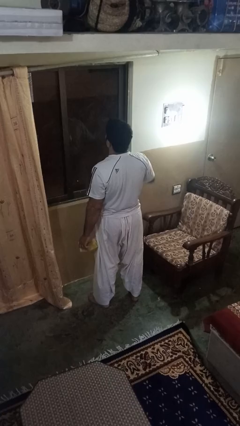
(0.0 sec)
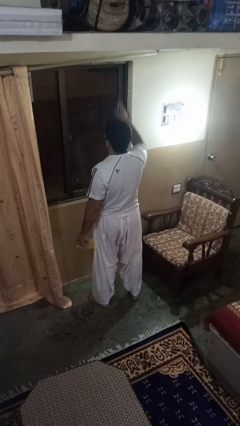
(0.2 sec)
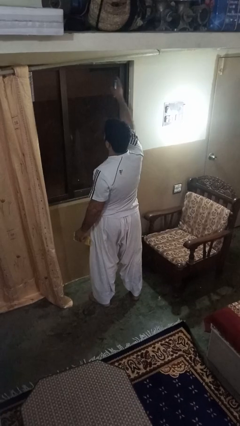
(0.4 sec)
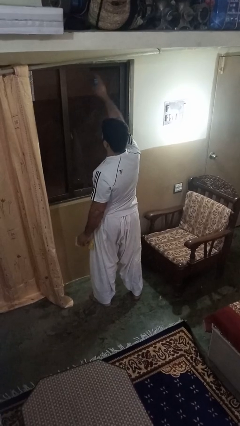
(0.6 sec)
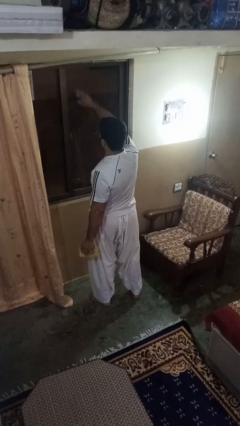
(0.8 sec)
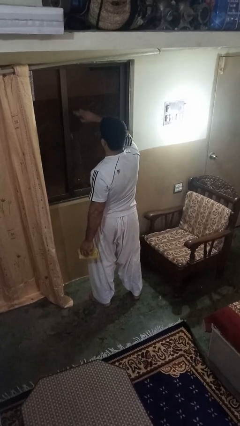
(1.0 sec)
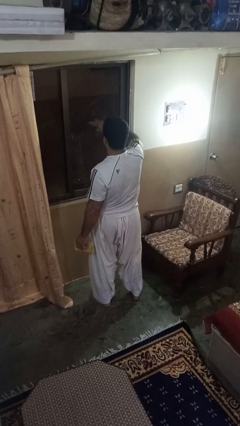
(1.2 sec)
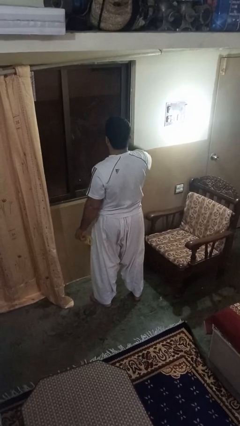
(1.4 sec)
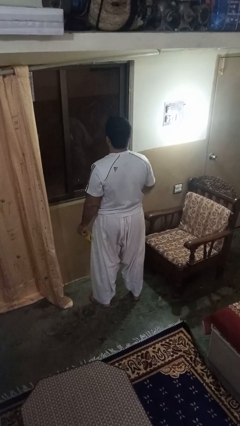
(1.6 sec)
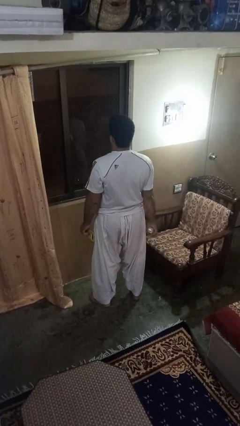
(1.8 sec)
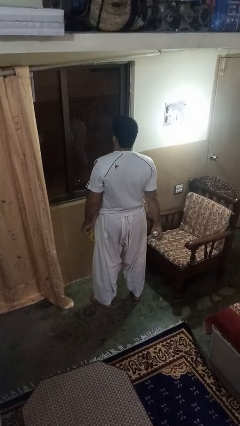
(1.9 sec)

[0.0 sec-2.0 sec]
person sprays from bottle

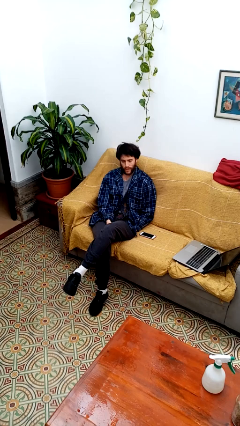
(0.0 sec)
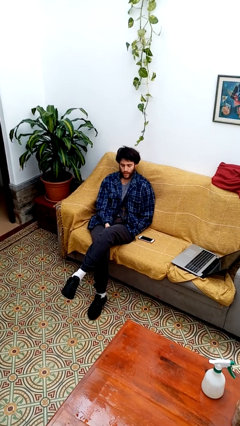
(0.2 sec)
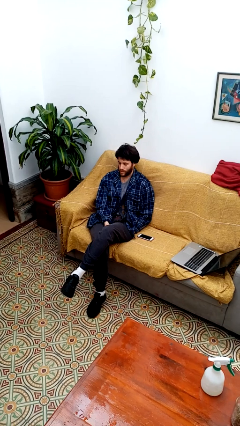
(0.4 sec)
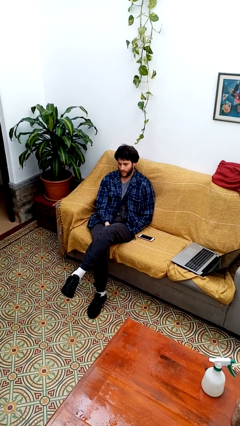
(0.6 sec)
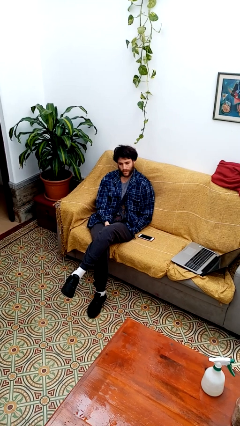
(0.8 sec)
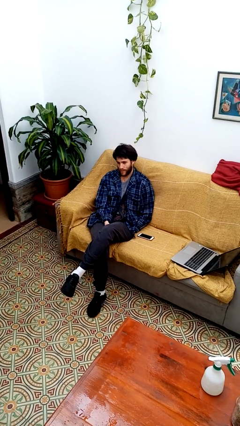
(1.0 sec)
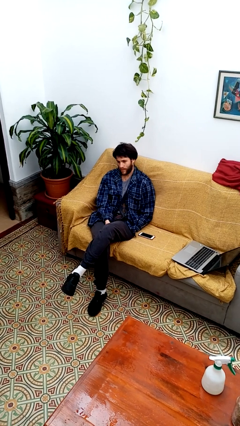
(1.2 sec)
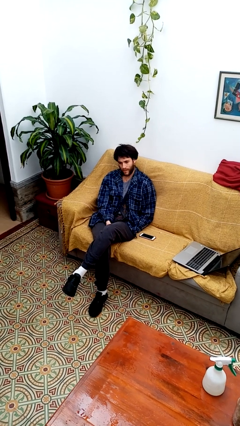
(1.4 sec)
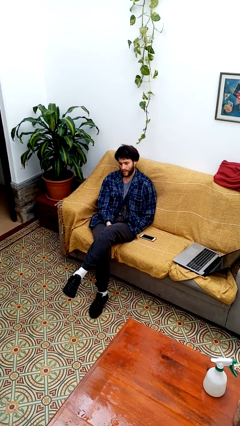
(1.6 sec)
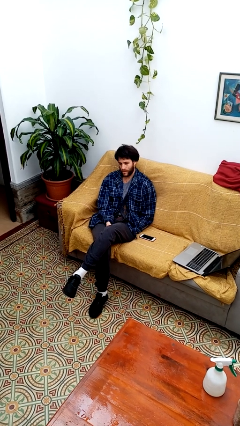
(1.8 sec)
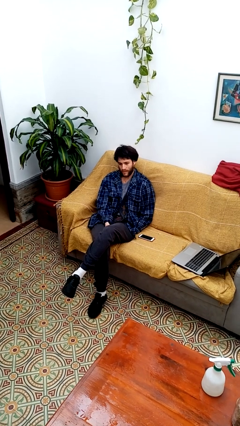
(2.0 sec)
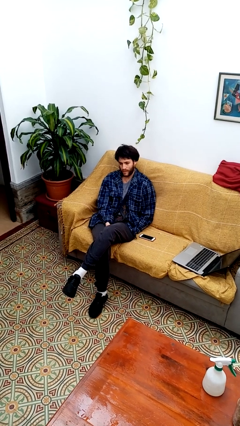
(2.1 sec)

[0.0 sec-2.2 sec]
person shakes head

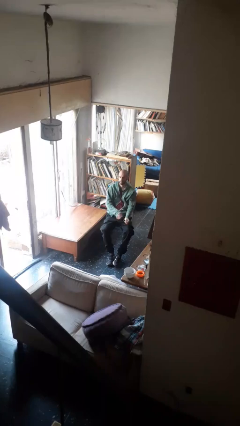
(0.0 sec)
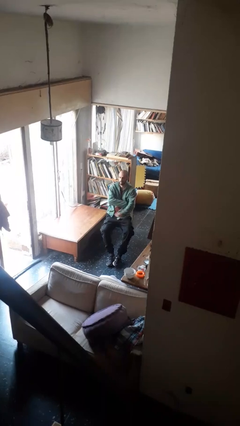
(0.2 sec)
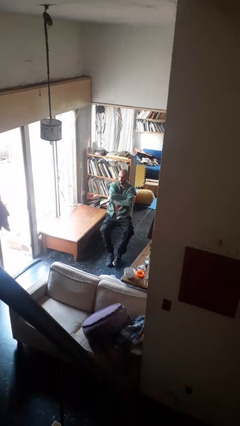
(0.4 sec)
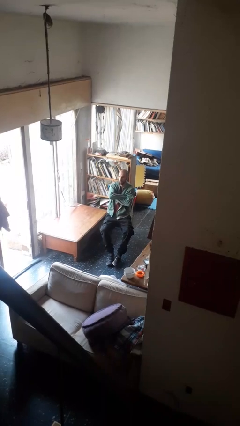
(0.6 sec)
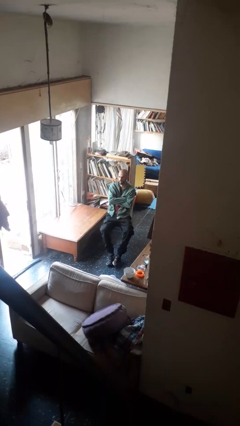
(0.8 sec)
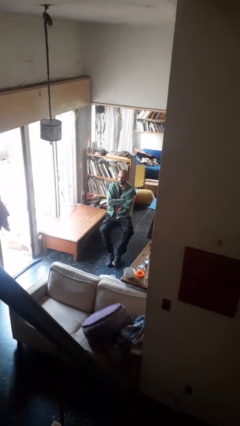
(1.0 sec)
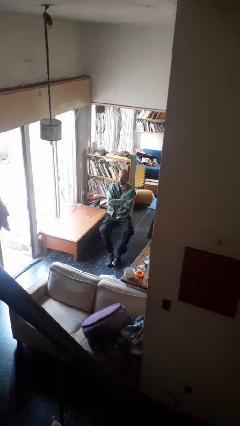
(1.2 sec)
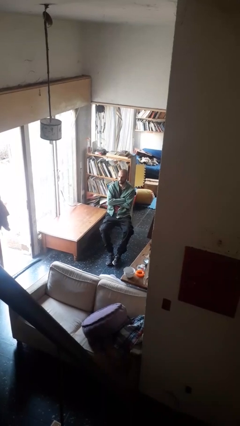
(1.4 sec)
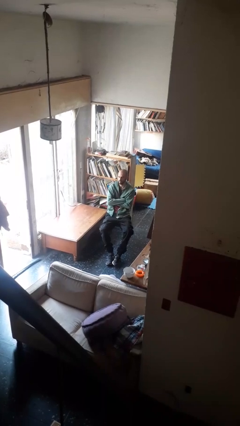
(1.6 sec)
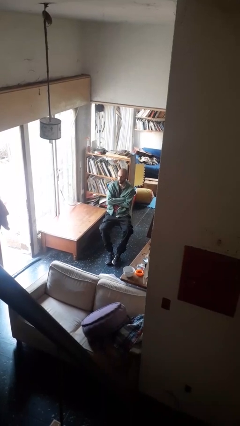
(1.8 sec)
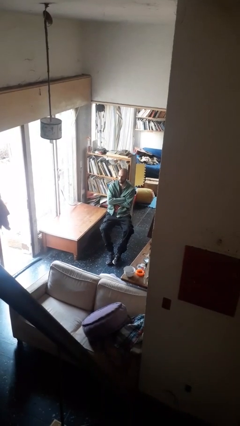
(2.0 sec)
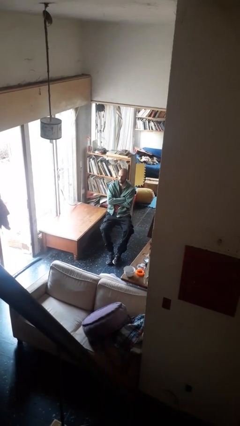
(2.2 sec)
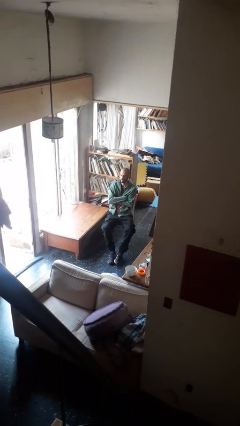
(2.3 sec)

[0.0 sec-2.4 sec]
person crosses arms

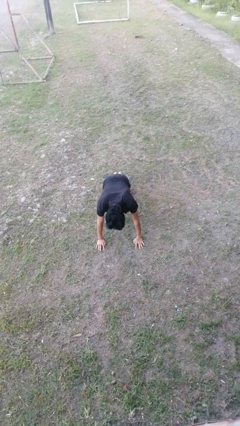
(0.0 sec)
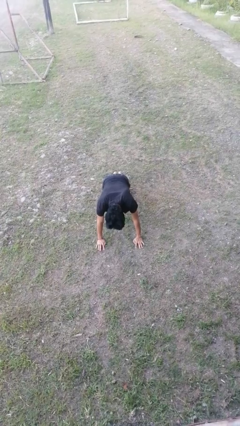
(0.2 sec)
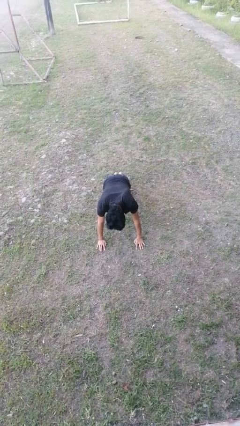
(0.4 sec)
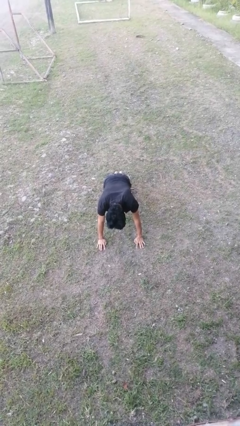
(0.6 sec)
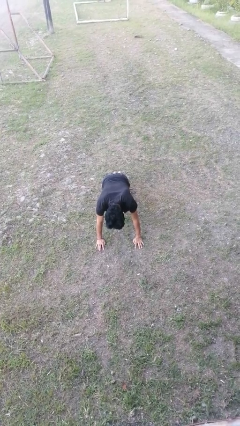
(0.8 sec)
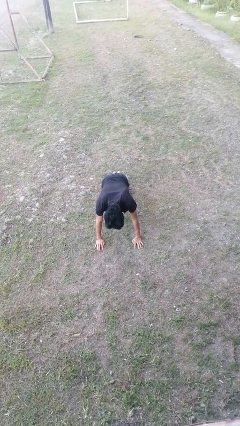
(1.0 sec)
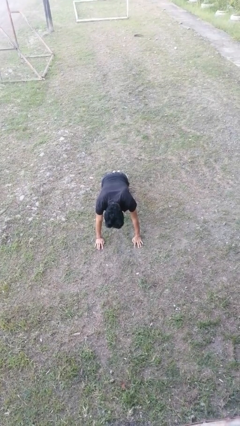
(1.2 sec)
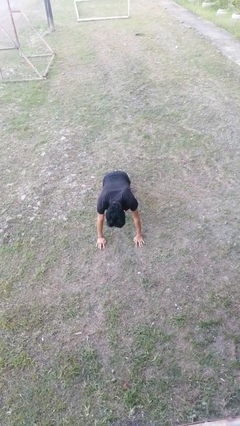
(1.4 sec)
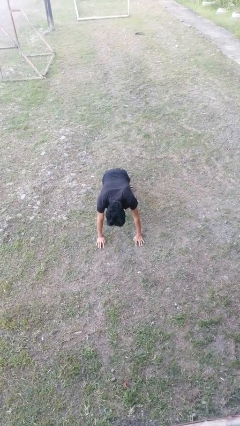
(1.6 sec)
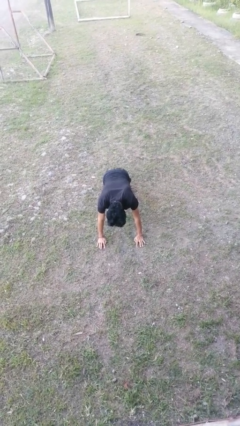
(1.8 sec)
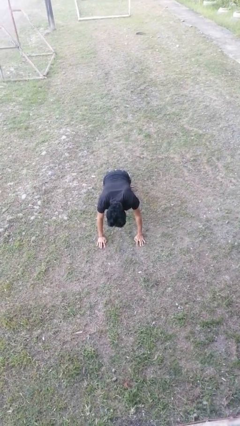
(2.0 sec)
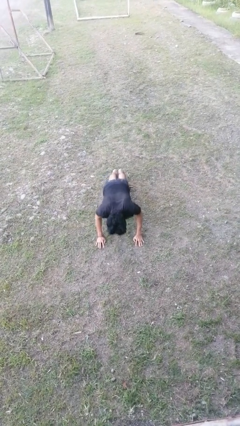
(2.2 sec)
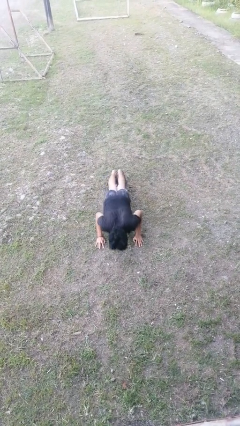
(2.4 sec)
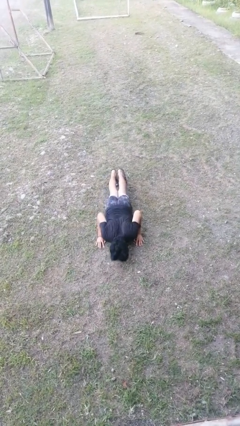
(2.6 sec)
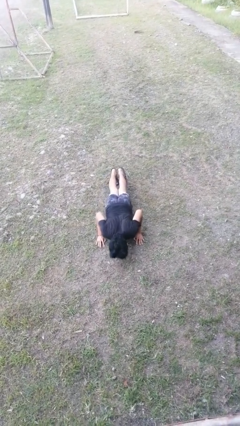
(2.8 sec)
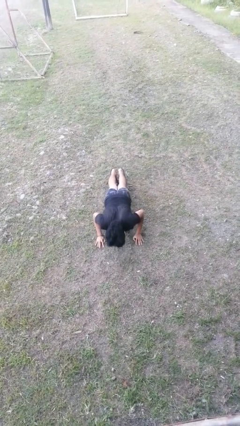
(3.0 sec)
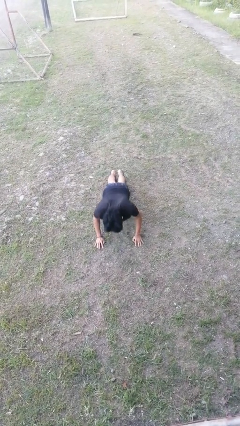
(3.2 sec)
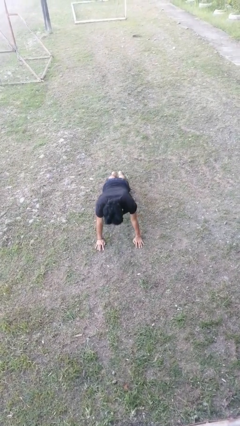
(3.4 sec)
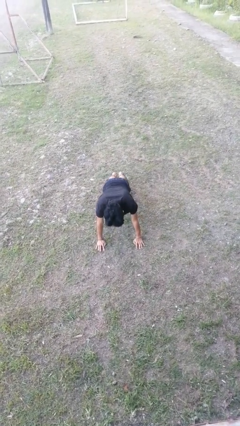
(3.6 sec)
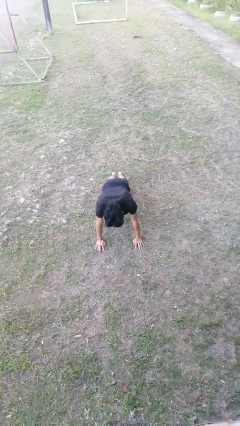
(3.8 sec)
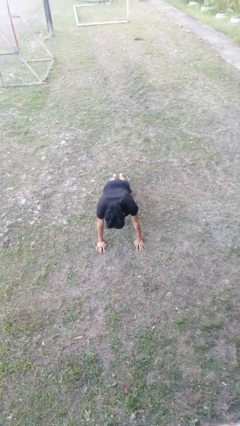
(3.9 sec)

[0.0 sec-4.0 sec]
person exercises with pushup

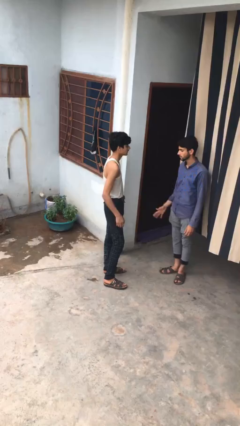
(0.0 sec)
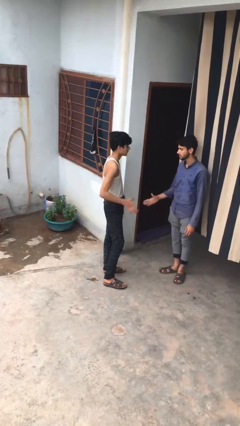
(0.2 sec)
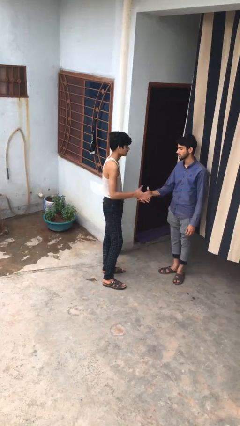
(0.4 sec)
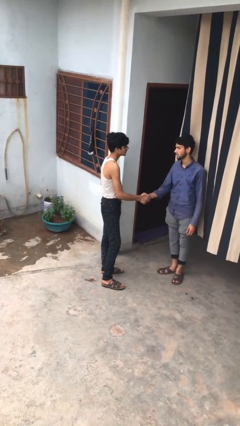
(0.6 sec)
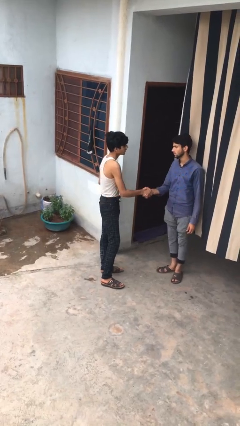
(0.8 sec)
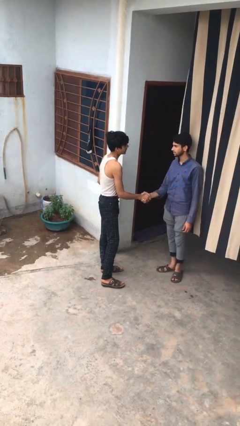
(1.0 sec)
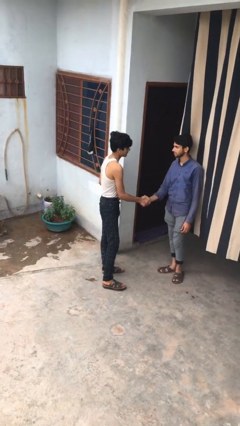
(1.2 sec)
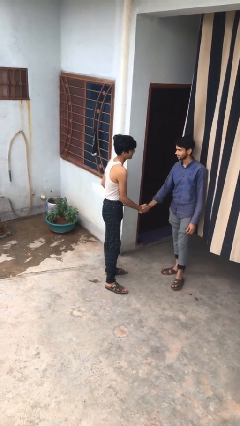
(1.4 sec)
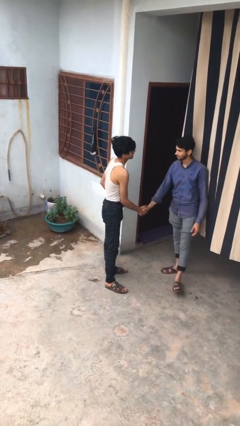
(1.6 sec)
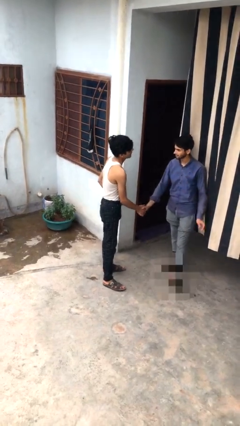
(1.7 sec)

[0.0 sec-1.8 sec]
person shakes hand

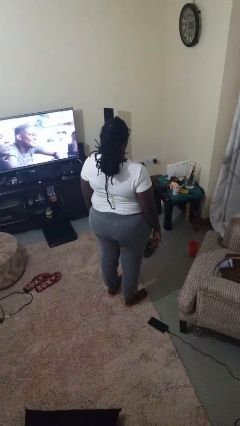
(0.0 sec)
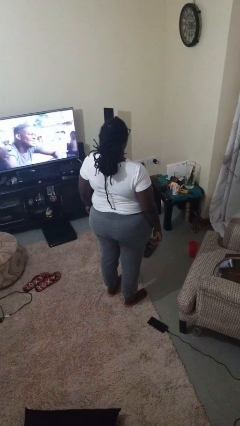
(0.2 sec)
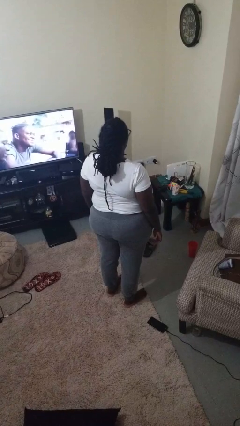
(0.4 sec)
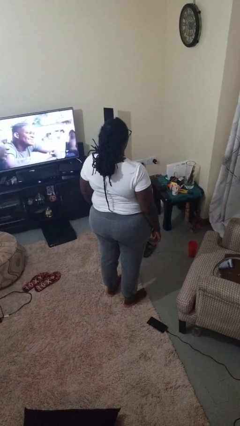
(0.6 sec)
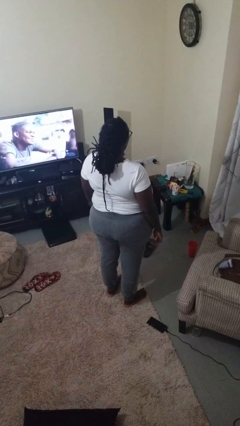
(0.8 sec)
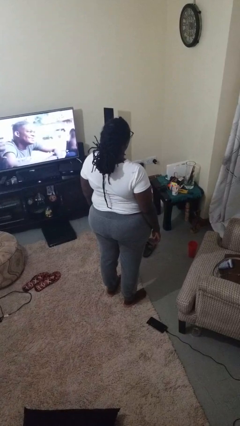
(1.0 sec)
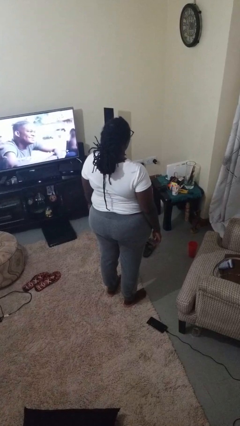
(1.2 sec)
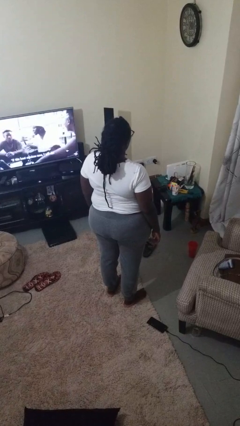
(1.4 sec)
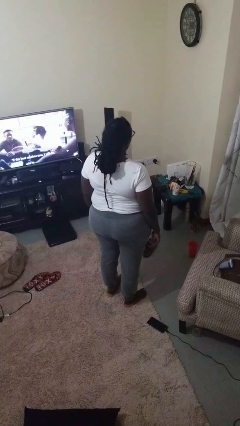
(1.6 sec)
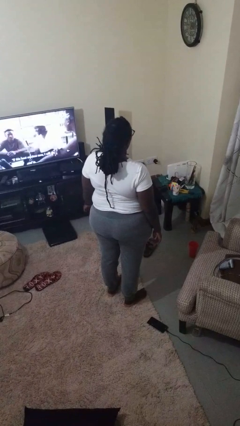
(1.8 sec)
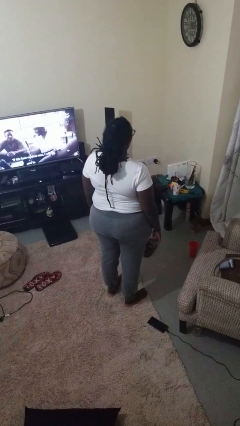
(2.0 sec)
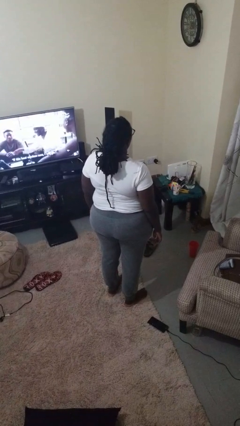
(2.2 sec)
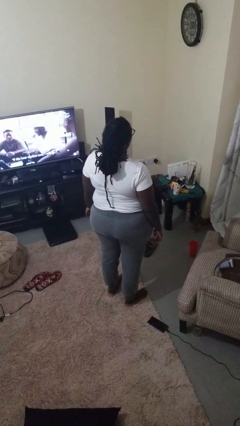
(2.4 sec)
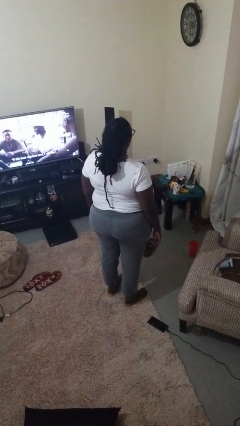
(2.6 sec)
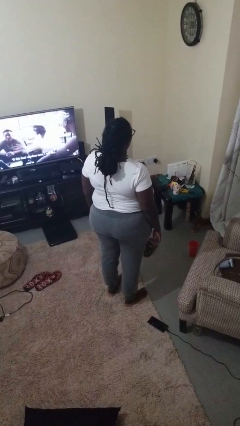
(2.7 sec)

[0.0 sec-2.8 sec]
person slaps hands on thighs

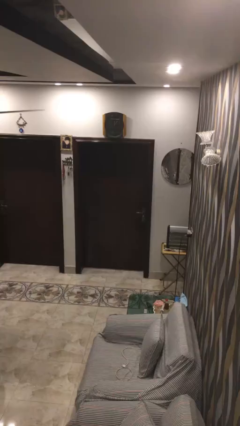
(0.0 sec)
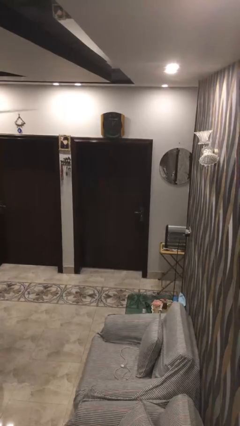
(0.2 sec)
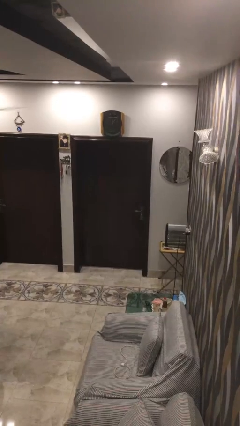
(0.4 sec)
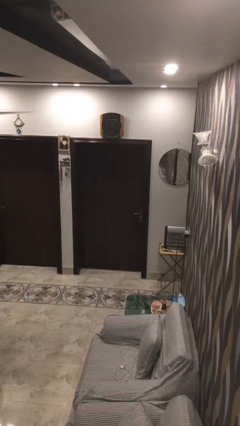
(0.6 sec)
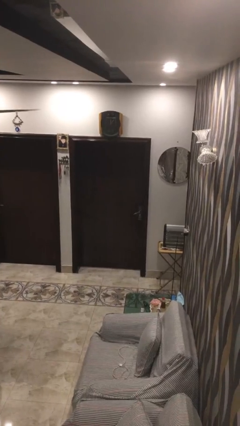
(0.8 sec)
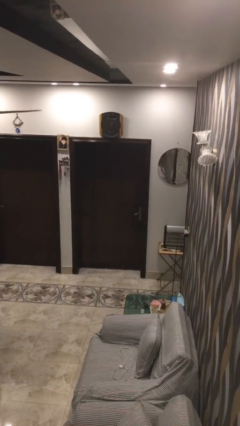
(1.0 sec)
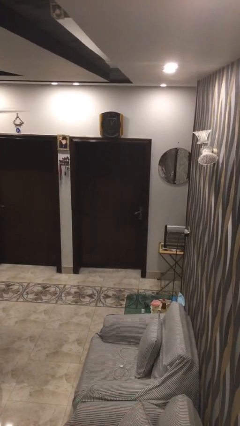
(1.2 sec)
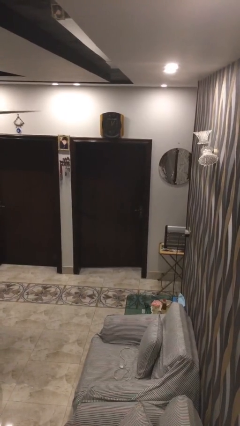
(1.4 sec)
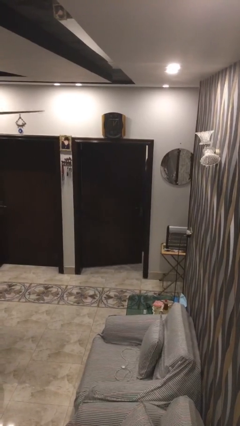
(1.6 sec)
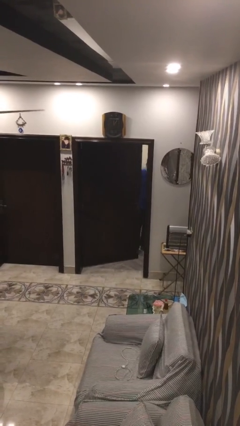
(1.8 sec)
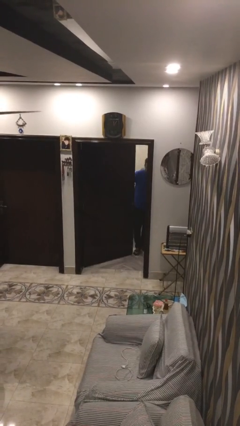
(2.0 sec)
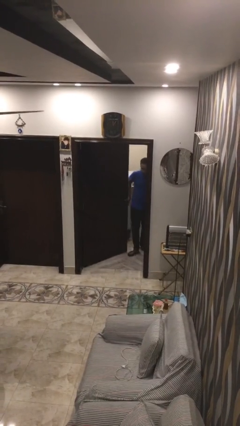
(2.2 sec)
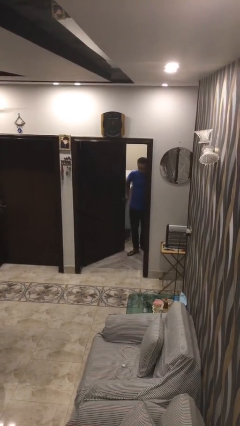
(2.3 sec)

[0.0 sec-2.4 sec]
person opens facility door
